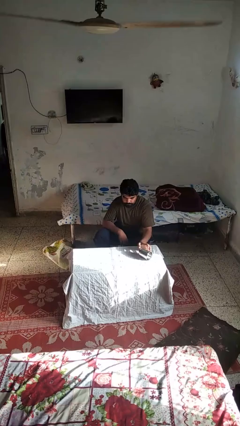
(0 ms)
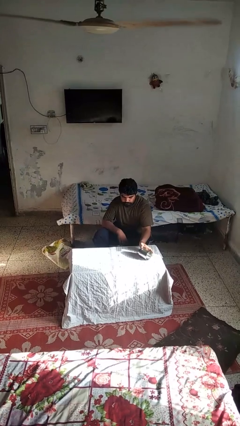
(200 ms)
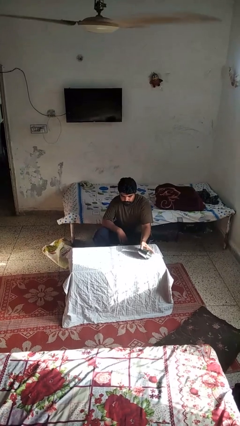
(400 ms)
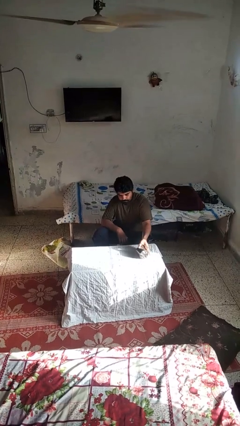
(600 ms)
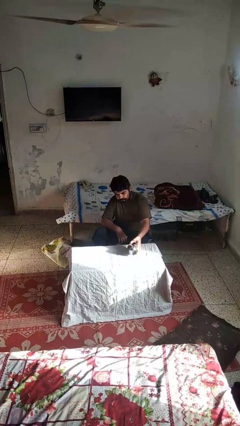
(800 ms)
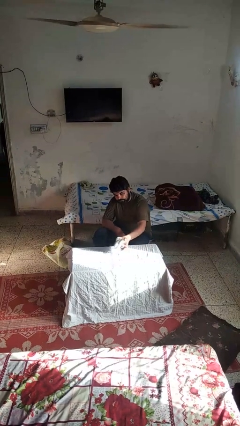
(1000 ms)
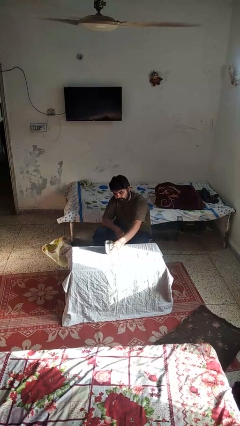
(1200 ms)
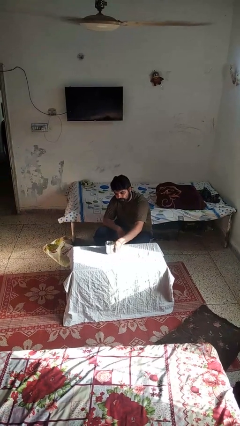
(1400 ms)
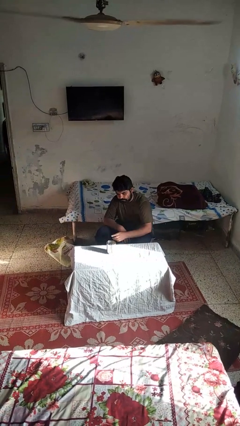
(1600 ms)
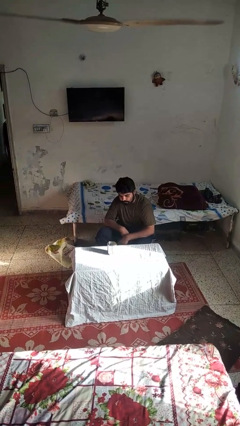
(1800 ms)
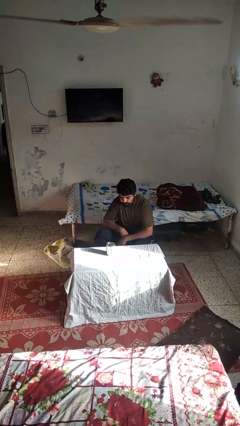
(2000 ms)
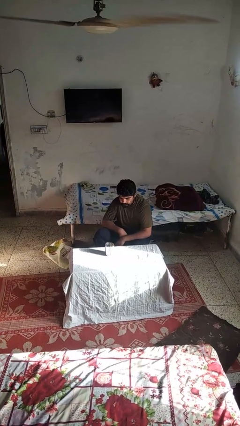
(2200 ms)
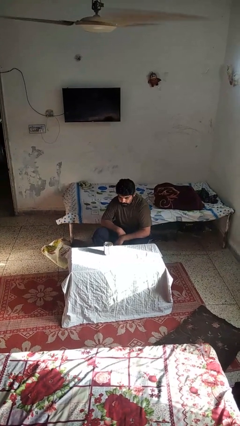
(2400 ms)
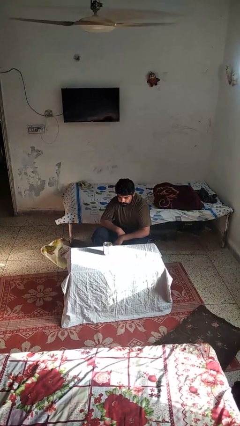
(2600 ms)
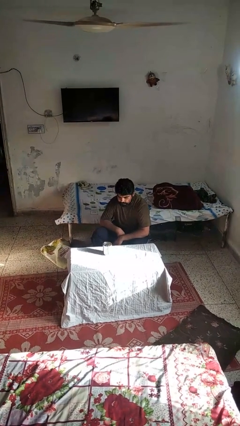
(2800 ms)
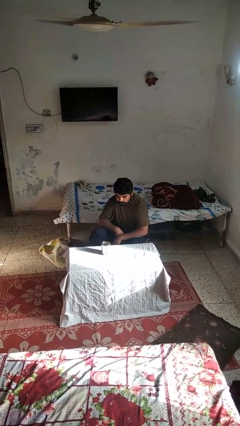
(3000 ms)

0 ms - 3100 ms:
person sets upright glass

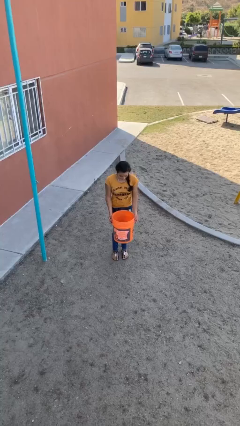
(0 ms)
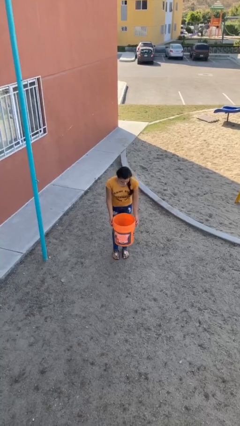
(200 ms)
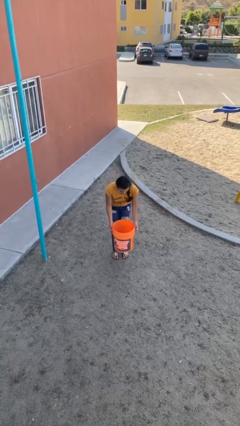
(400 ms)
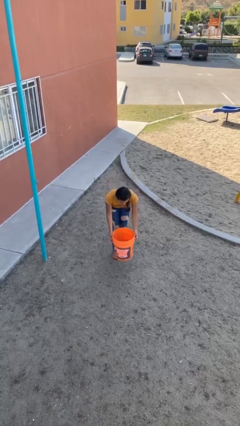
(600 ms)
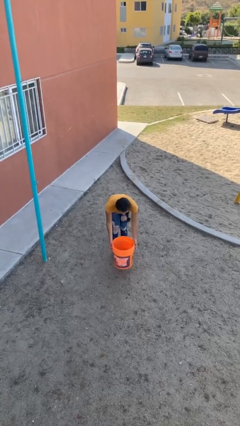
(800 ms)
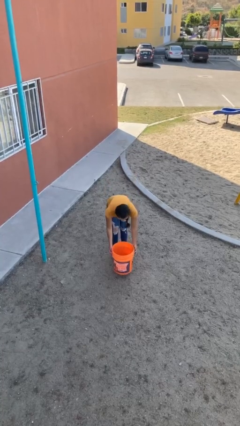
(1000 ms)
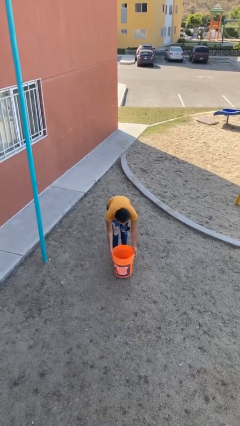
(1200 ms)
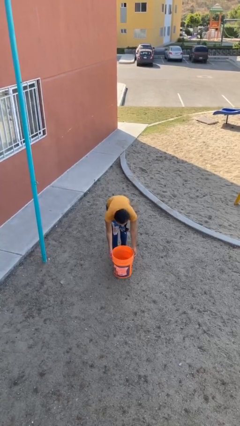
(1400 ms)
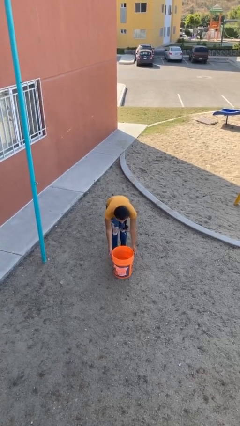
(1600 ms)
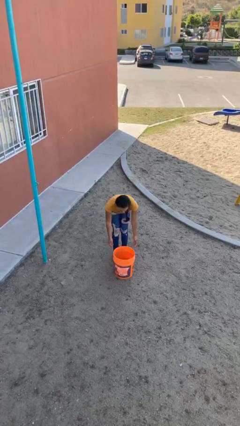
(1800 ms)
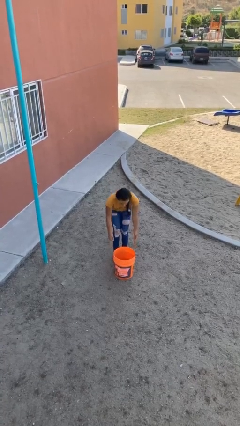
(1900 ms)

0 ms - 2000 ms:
person puts down object on floor

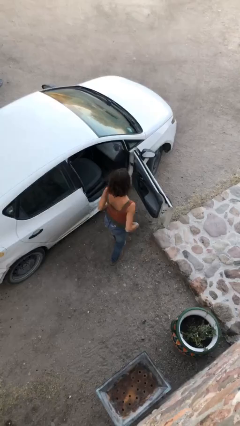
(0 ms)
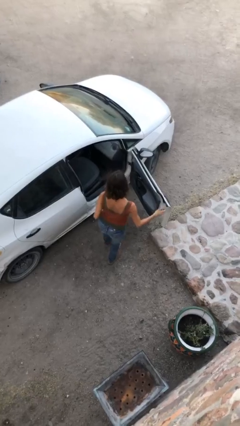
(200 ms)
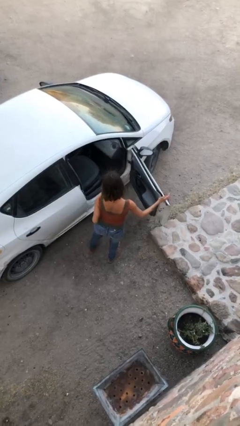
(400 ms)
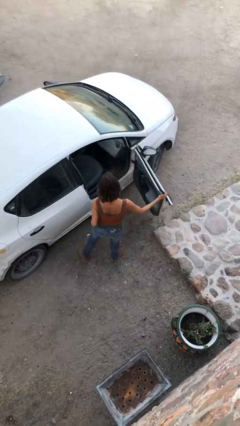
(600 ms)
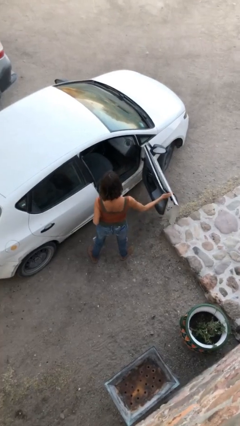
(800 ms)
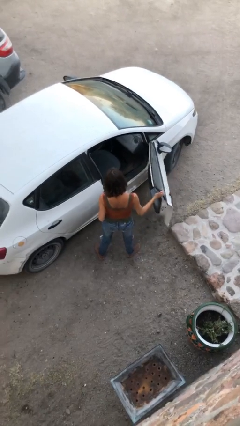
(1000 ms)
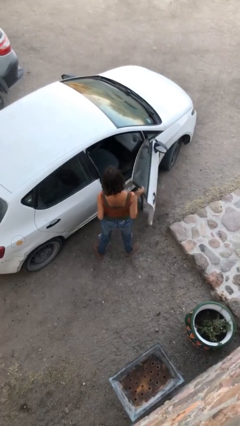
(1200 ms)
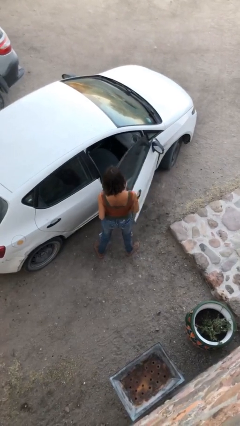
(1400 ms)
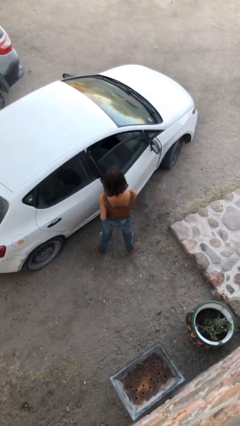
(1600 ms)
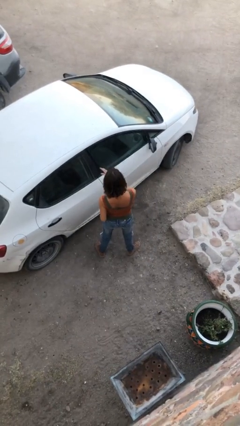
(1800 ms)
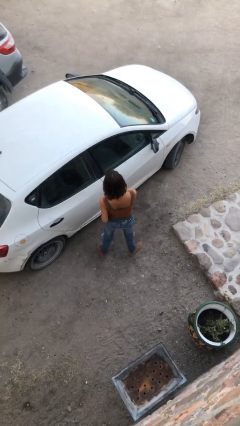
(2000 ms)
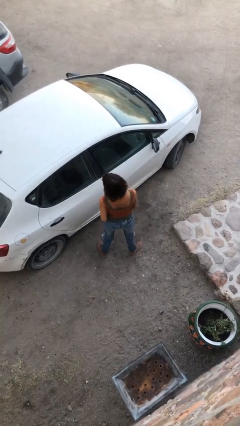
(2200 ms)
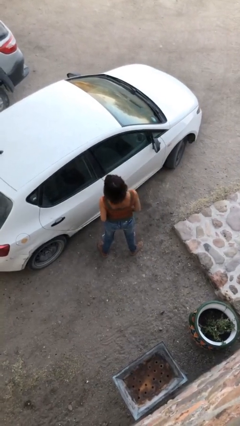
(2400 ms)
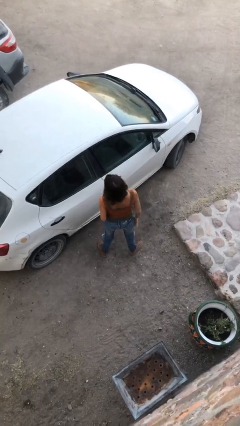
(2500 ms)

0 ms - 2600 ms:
person closes car door

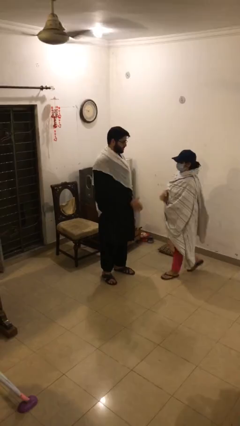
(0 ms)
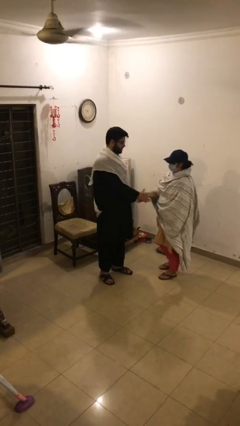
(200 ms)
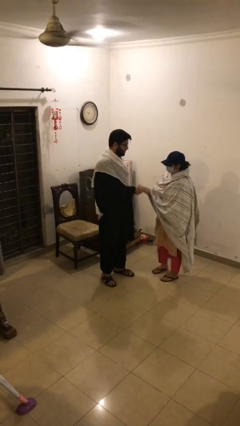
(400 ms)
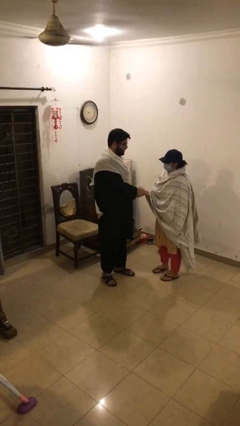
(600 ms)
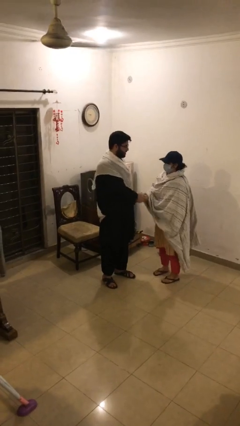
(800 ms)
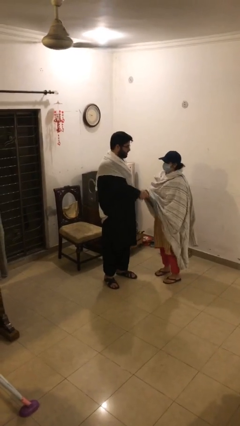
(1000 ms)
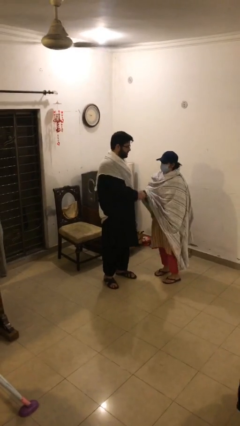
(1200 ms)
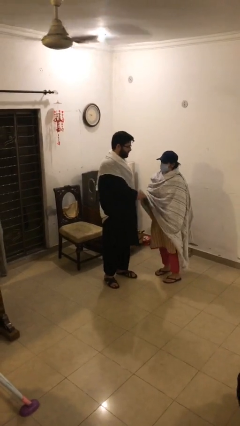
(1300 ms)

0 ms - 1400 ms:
person shakes hand

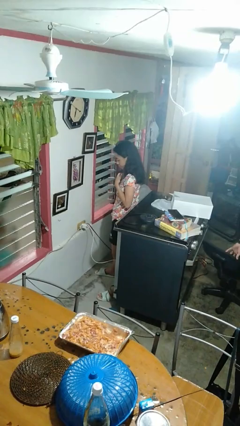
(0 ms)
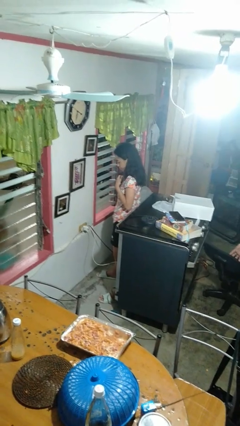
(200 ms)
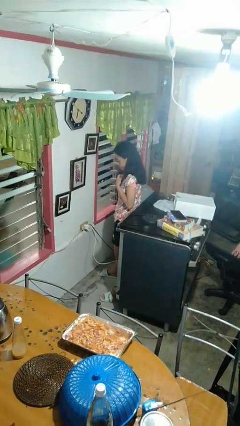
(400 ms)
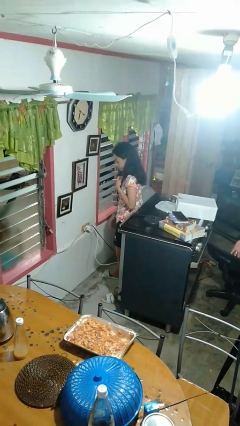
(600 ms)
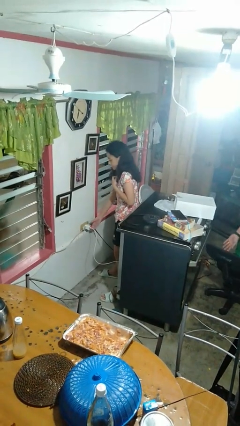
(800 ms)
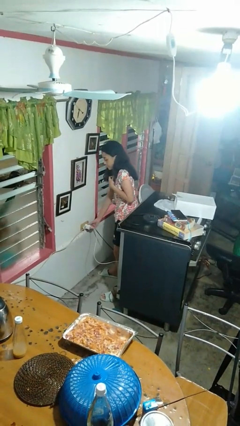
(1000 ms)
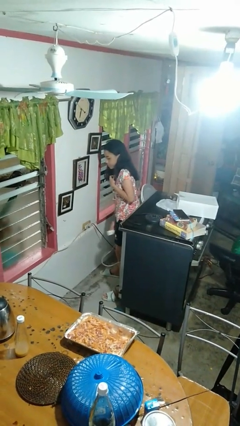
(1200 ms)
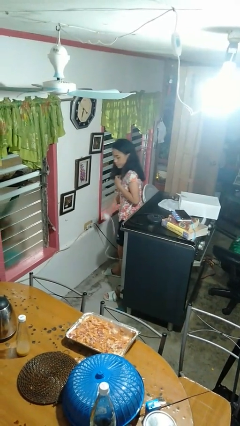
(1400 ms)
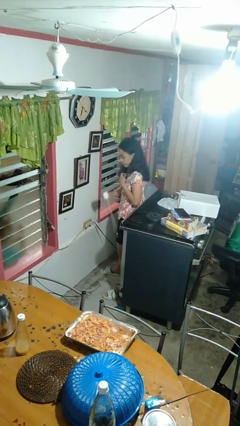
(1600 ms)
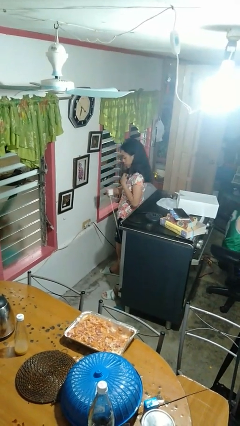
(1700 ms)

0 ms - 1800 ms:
person unplugs from electrical socket

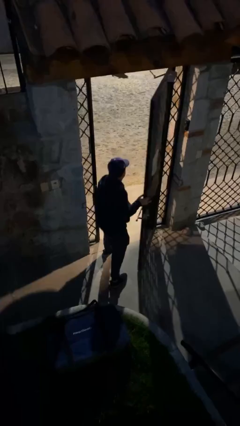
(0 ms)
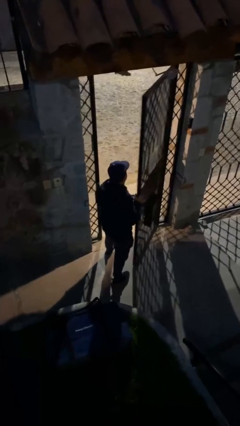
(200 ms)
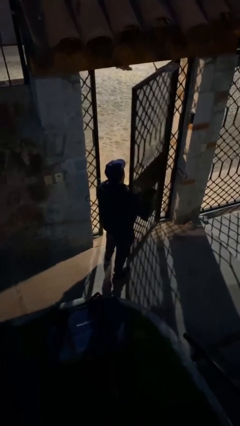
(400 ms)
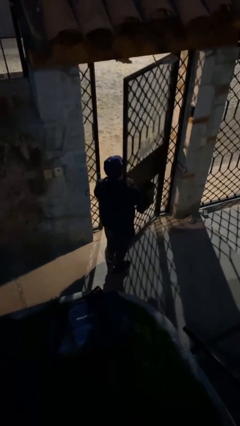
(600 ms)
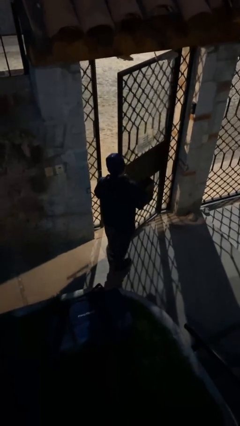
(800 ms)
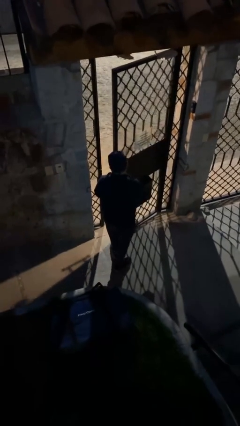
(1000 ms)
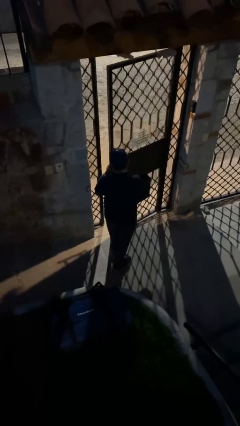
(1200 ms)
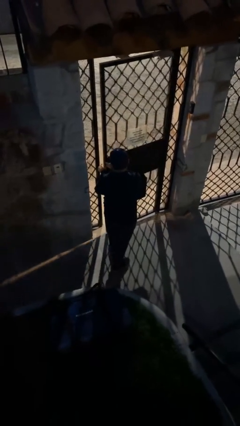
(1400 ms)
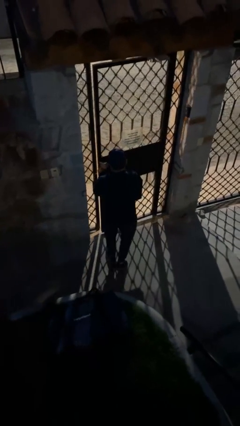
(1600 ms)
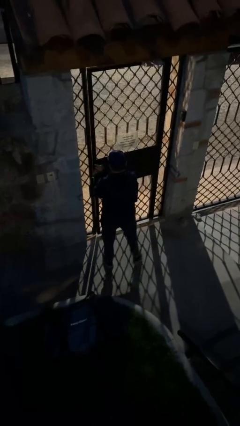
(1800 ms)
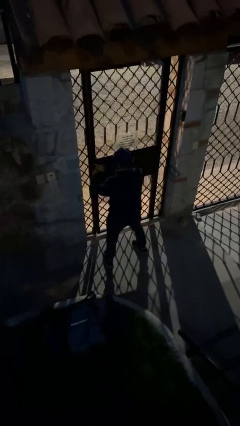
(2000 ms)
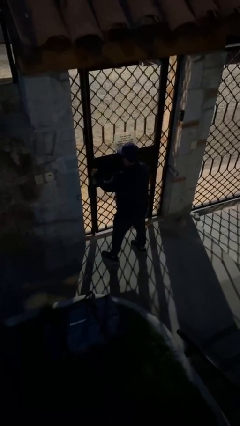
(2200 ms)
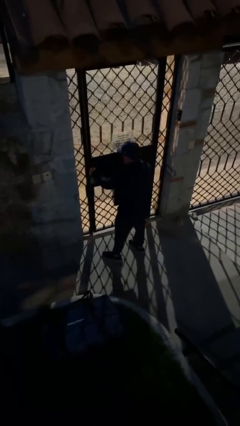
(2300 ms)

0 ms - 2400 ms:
person closes facility door

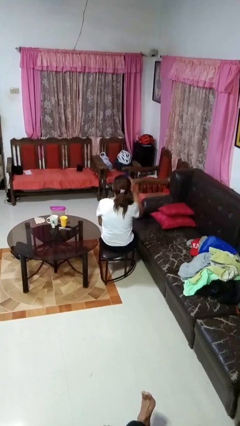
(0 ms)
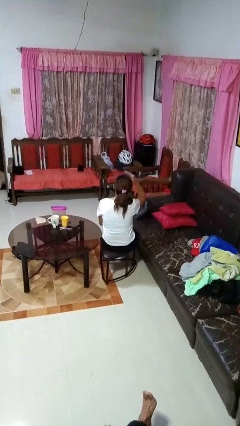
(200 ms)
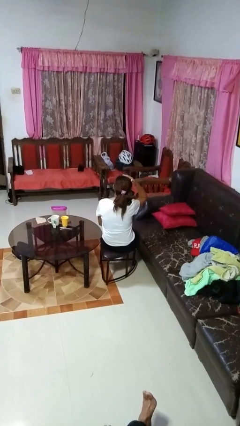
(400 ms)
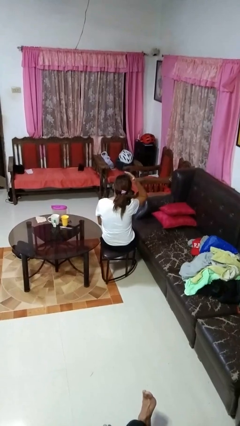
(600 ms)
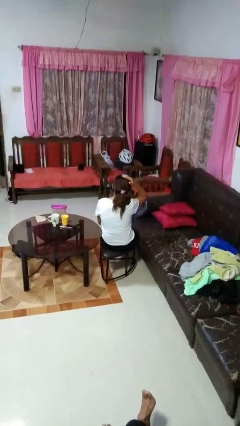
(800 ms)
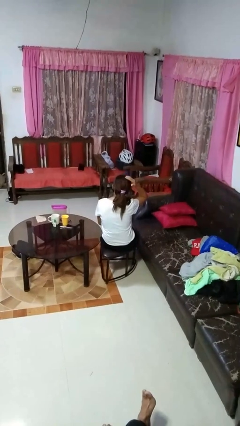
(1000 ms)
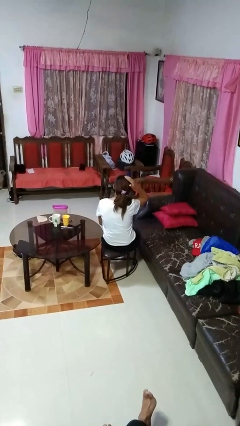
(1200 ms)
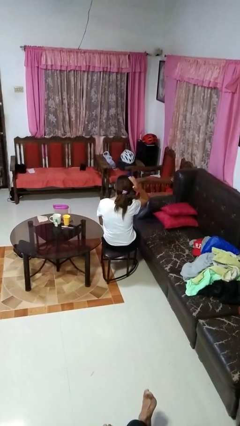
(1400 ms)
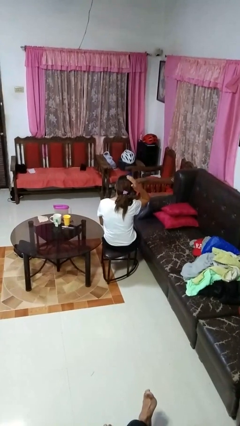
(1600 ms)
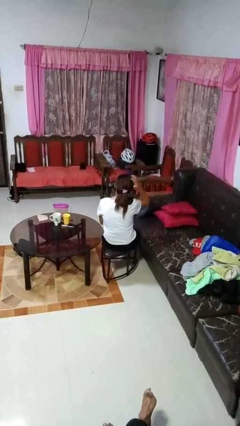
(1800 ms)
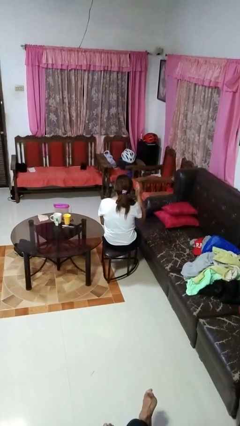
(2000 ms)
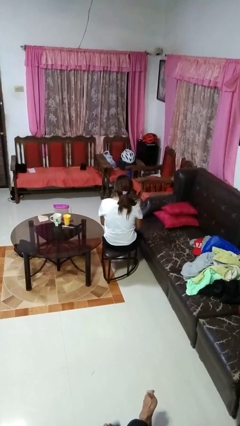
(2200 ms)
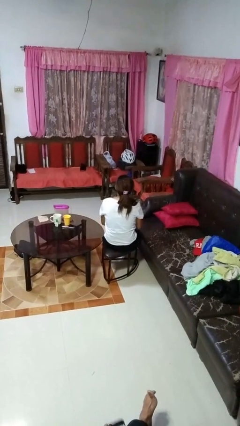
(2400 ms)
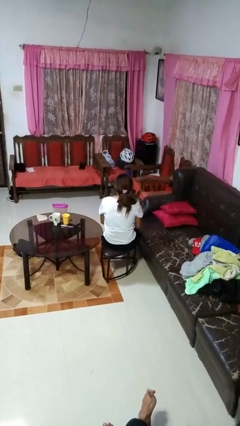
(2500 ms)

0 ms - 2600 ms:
person pats head

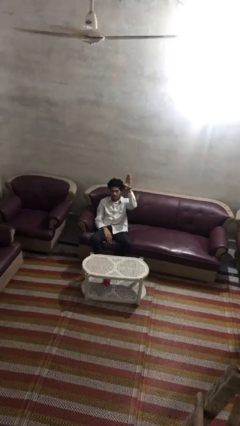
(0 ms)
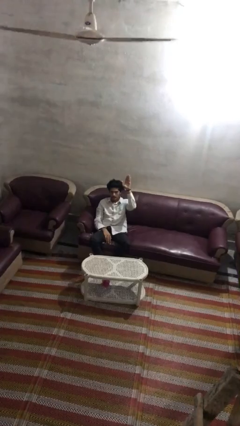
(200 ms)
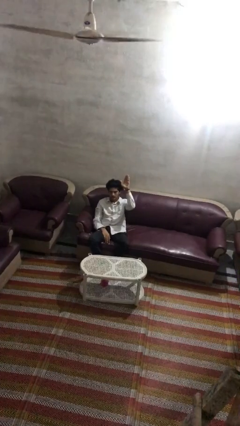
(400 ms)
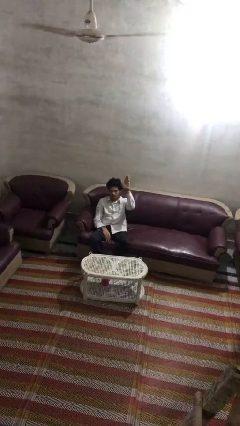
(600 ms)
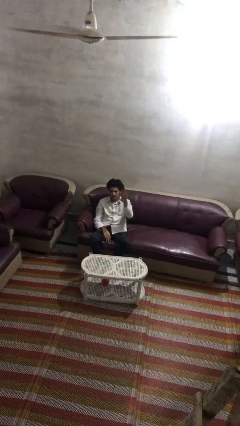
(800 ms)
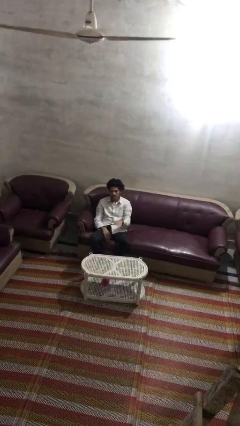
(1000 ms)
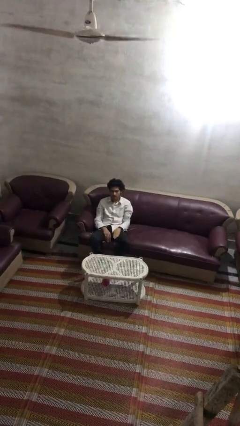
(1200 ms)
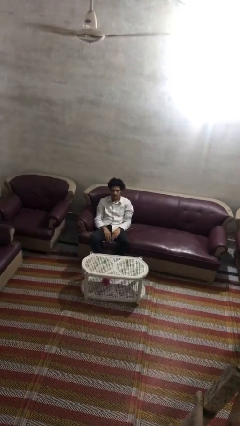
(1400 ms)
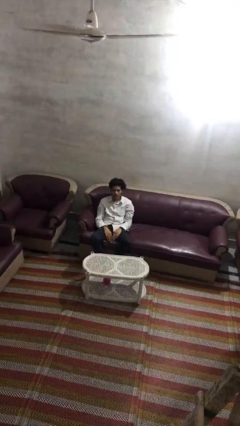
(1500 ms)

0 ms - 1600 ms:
person gestures lower hand
